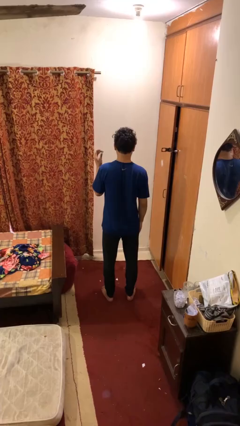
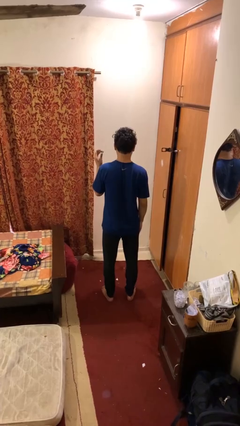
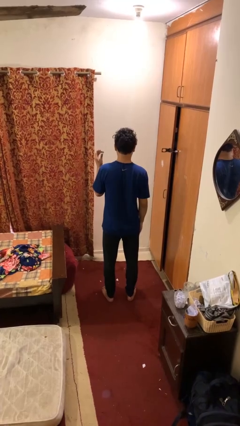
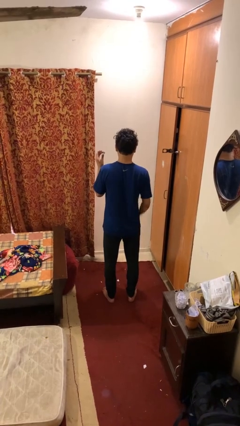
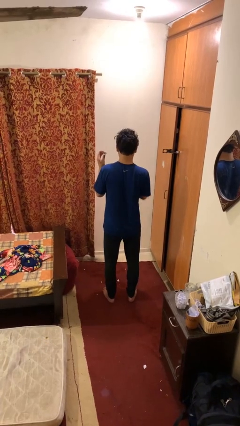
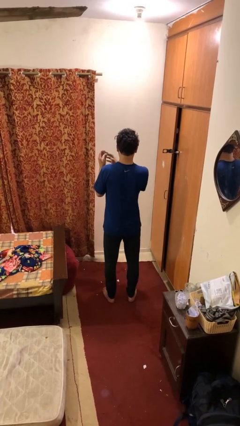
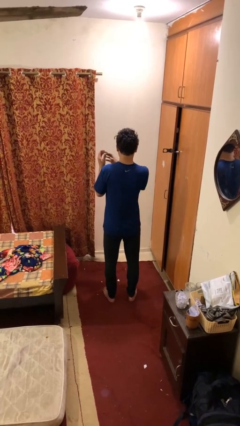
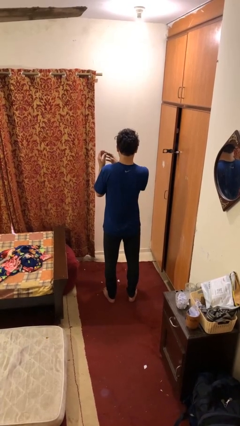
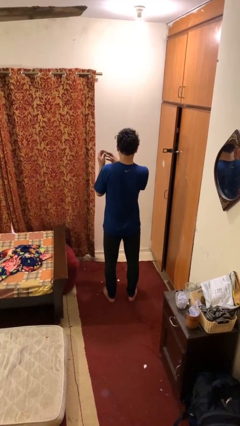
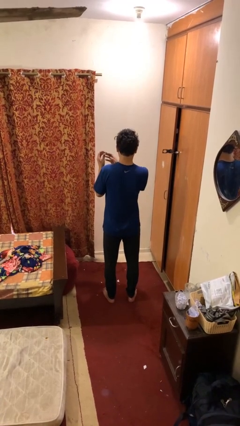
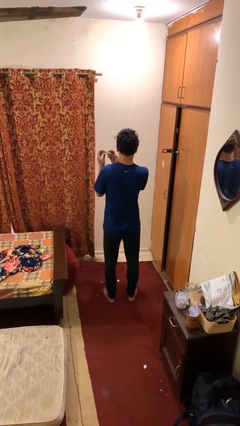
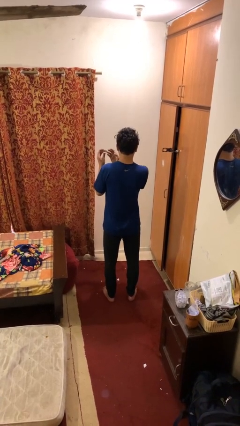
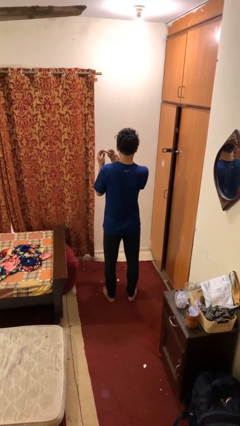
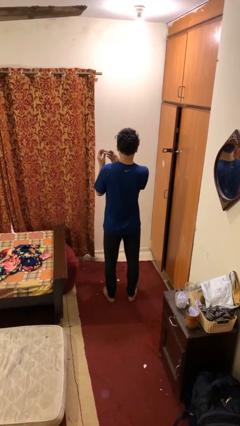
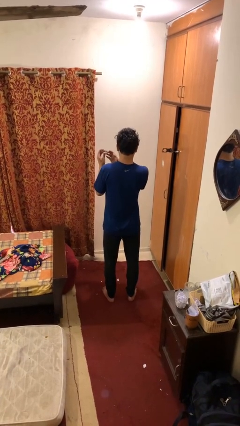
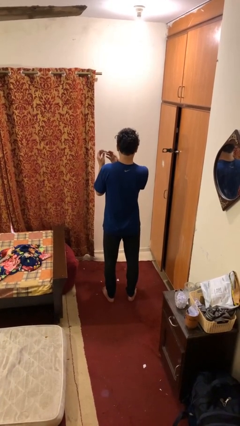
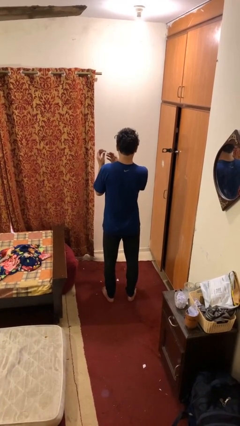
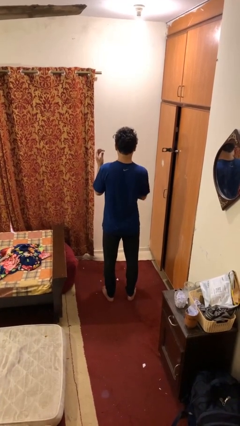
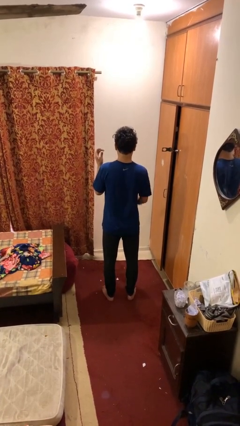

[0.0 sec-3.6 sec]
person clips fingernails

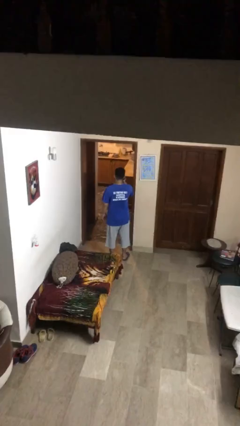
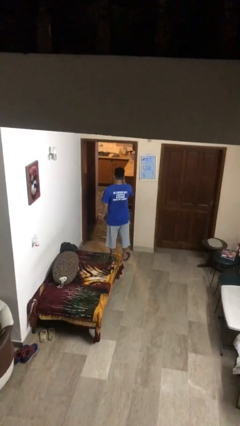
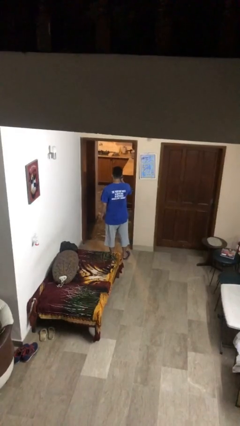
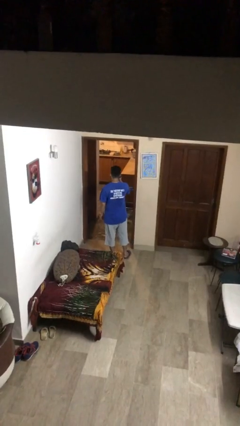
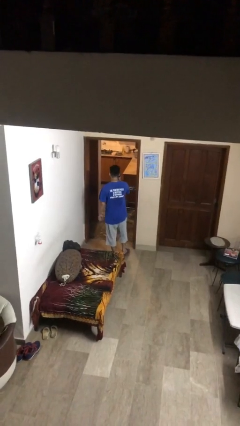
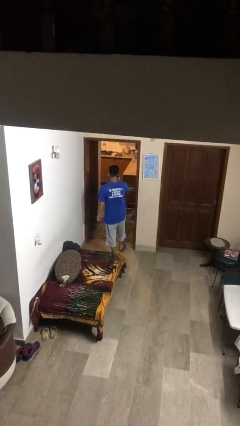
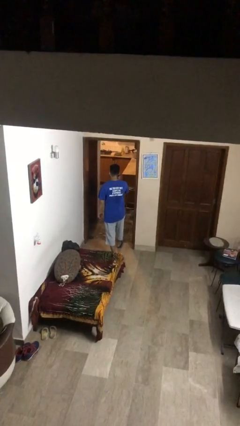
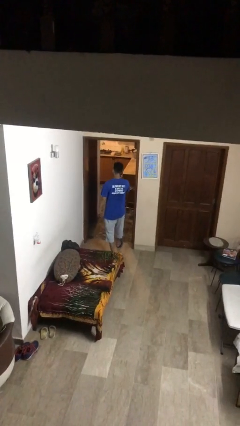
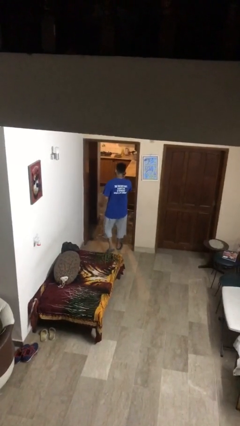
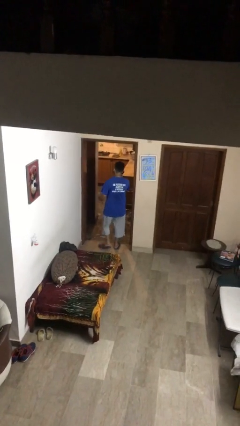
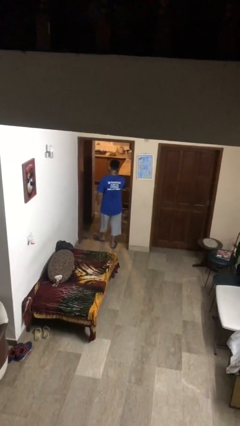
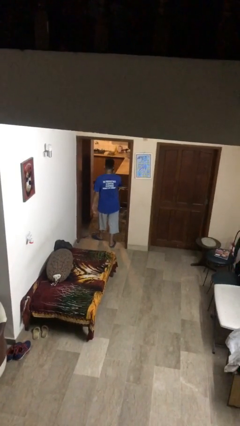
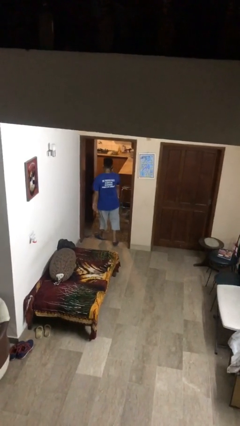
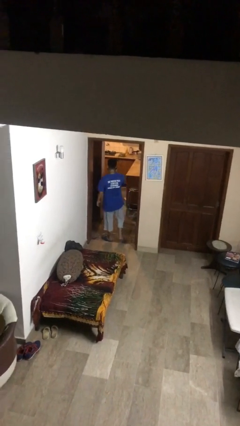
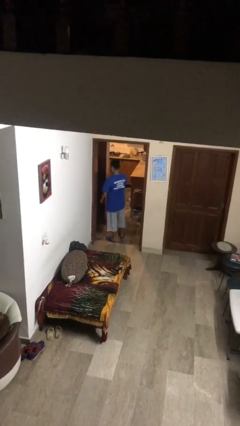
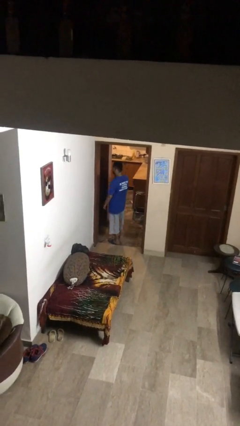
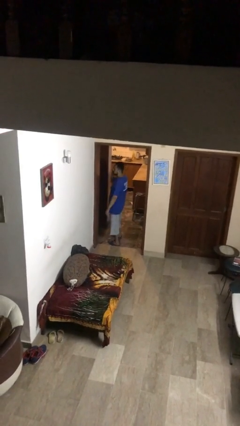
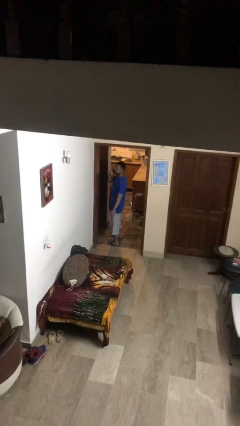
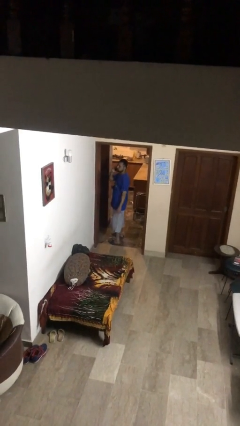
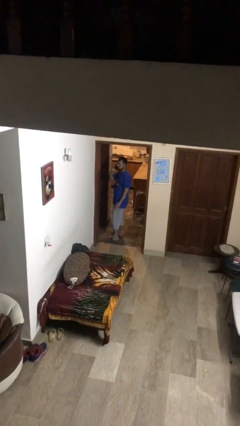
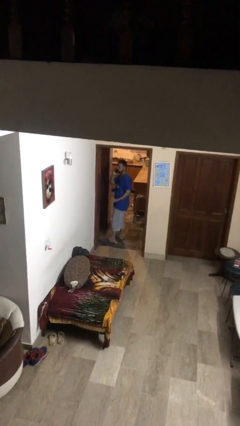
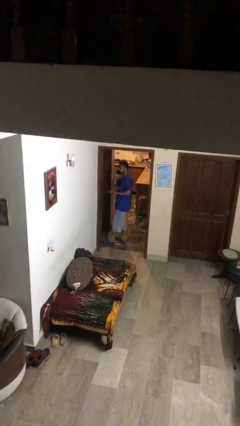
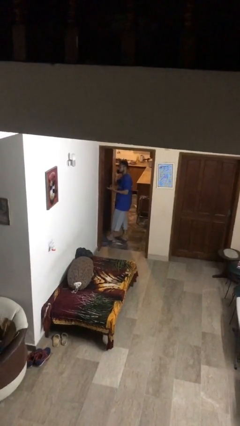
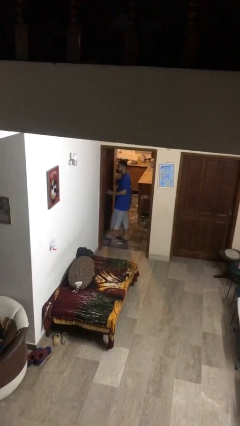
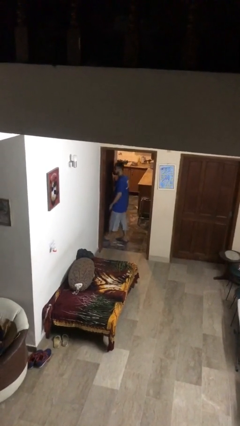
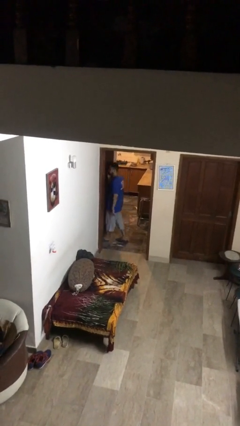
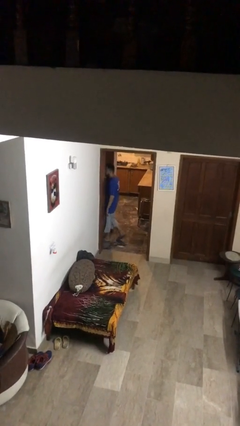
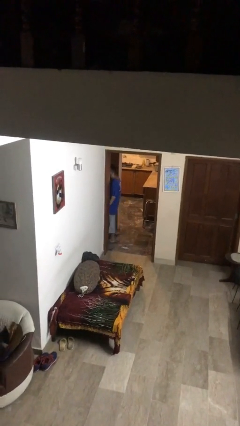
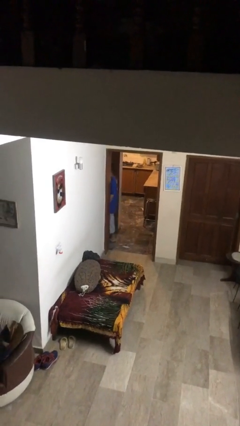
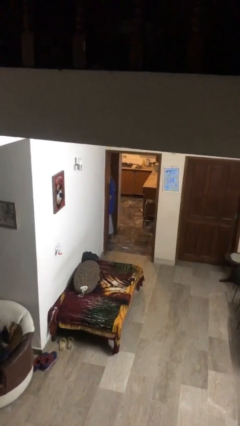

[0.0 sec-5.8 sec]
person exits scene through structure

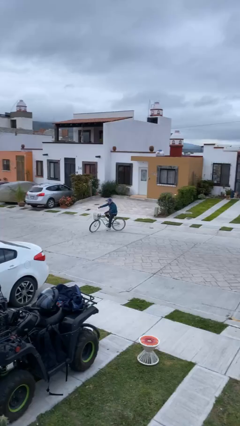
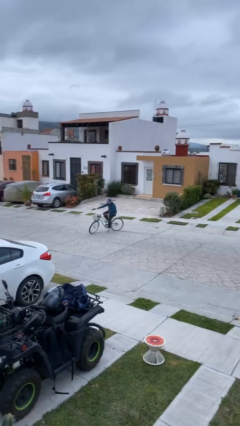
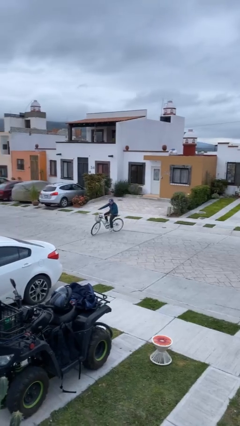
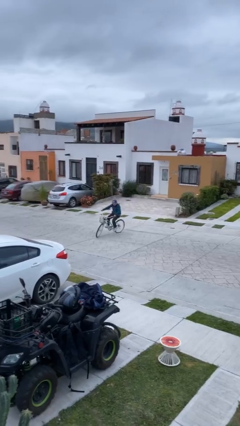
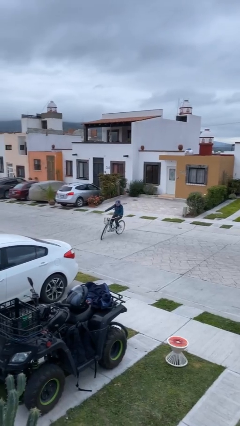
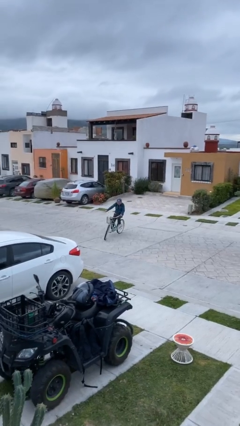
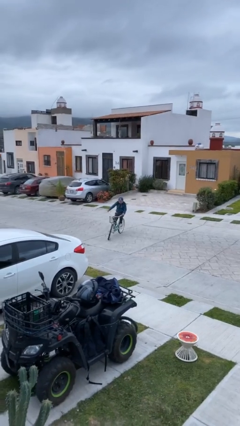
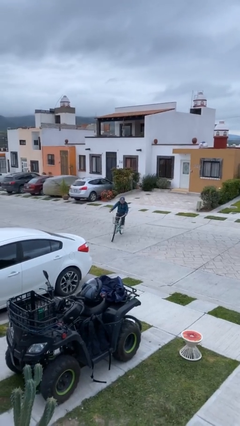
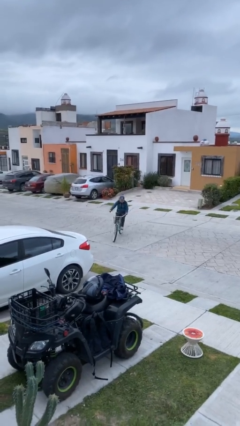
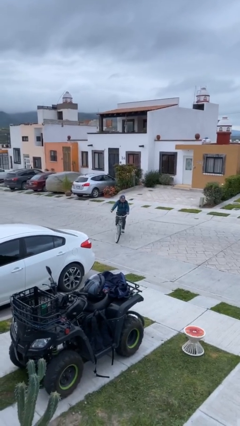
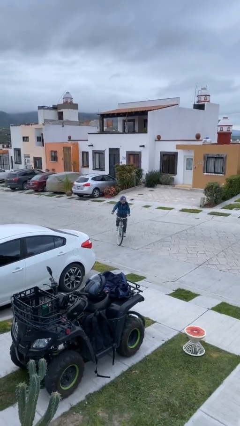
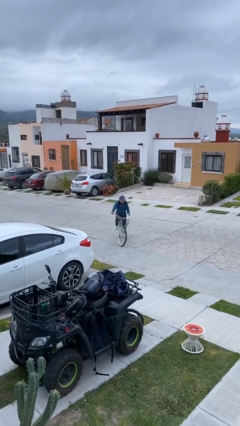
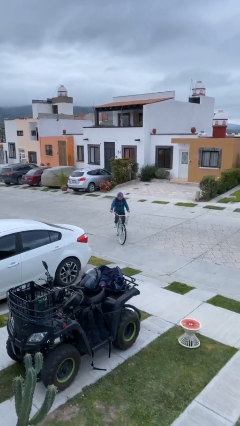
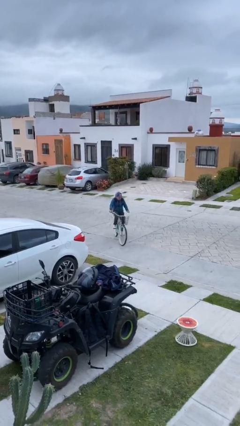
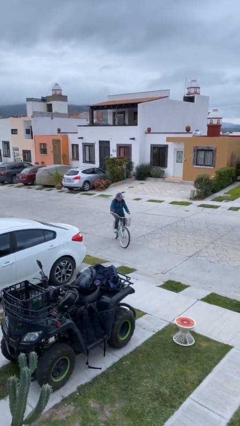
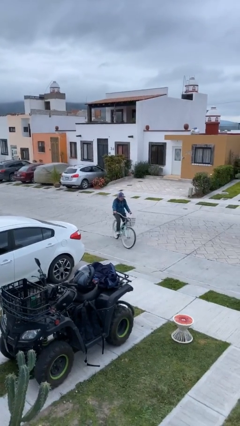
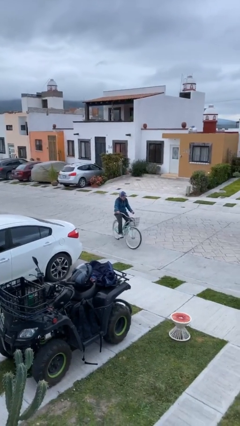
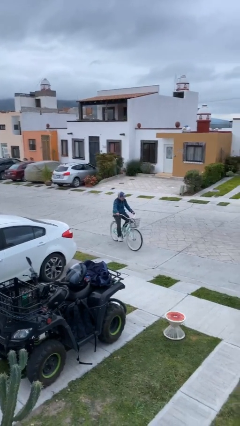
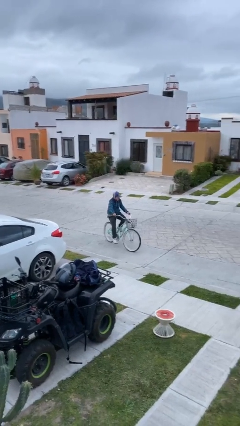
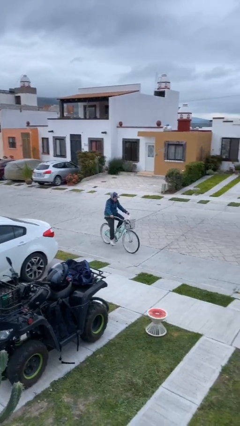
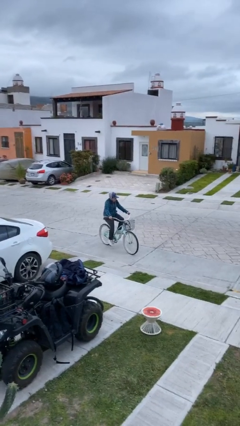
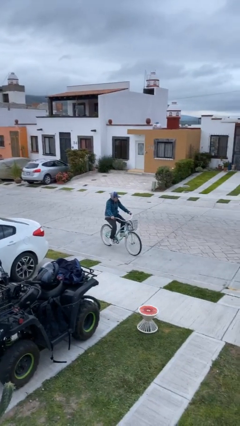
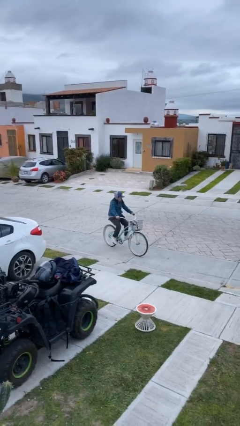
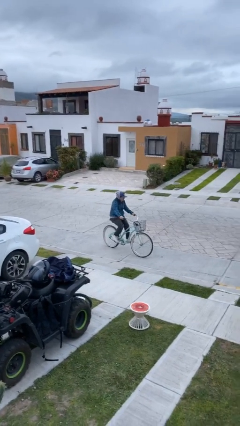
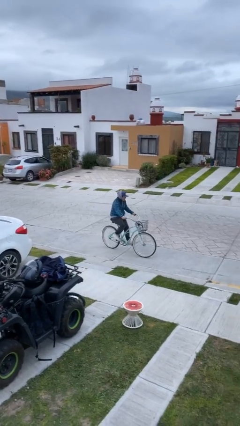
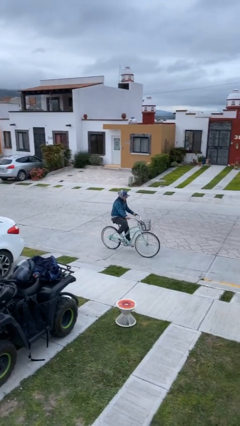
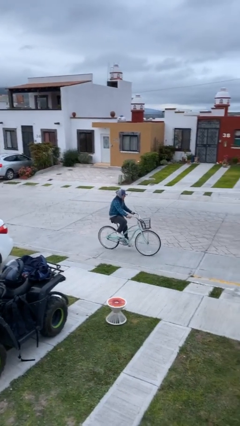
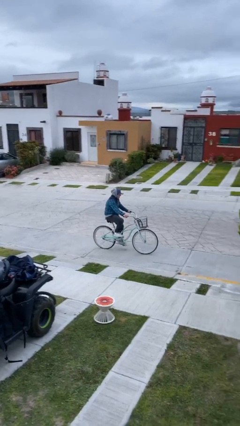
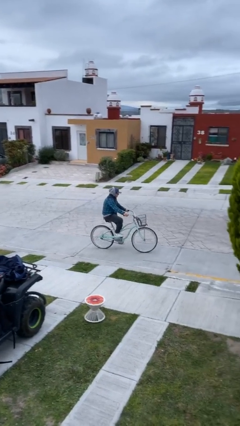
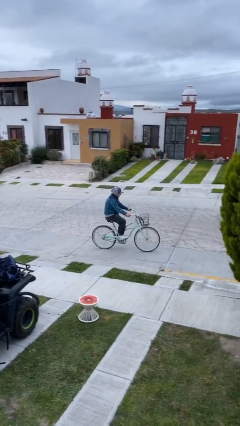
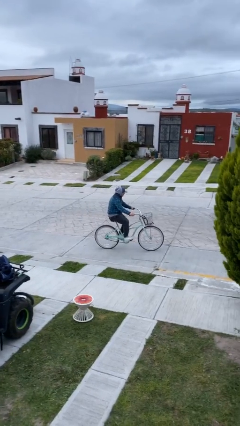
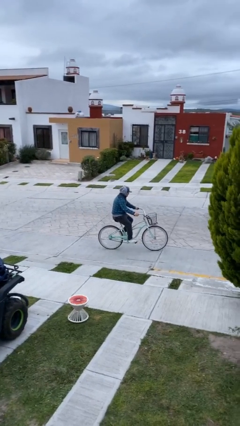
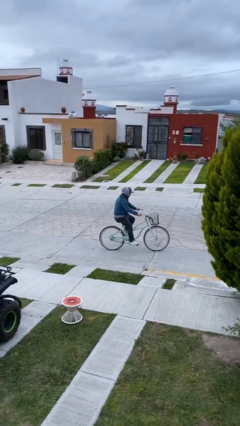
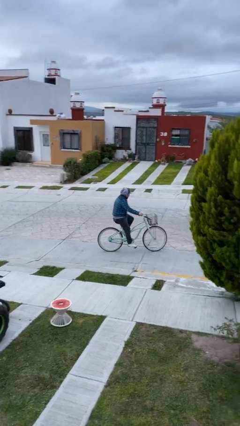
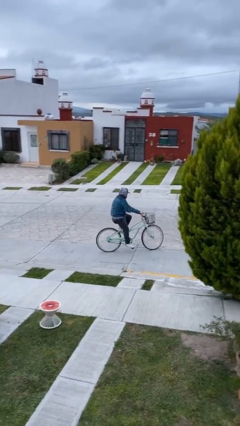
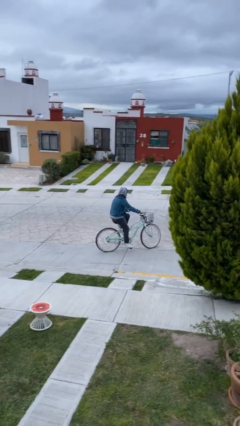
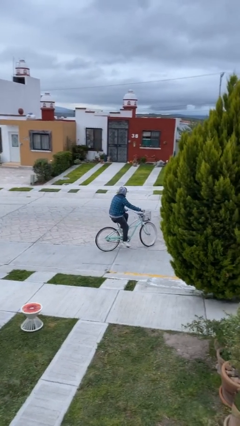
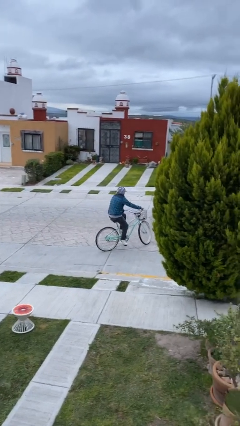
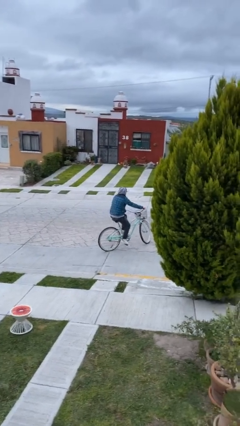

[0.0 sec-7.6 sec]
person rides bicycle

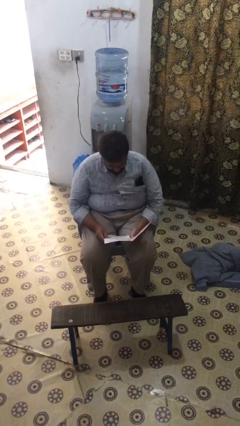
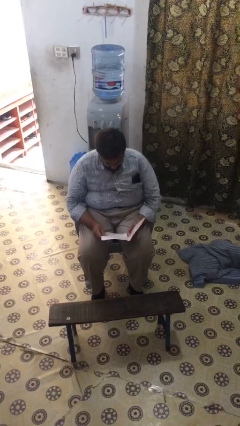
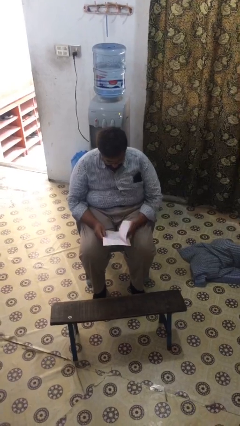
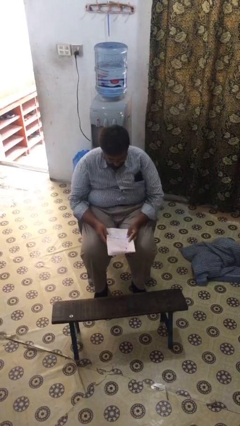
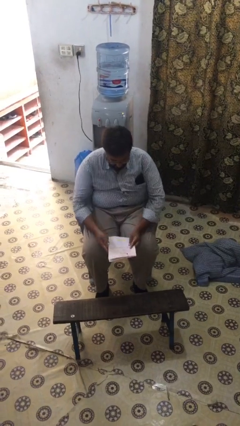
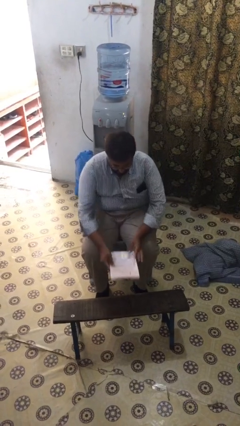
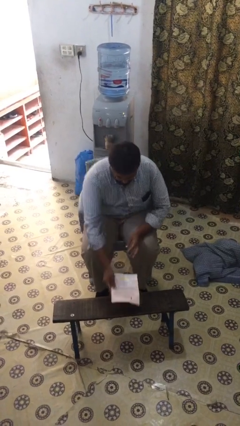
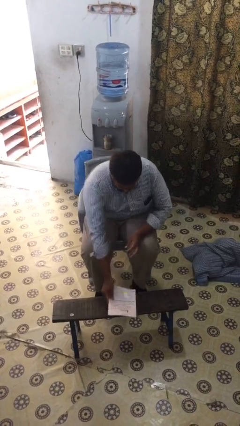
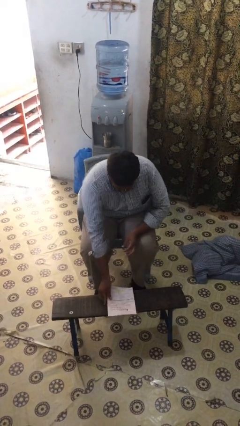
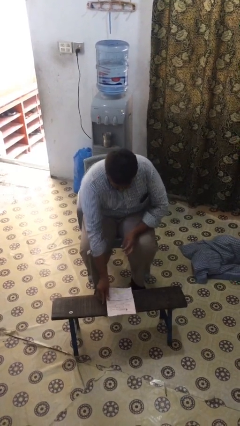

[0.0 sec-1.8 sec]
person puts down object on table
